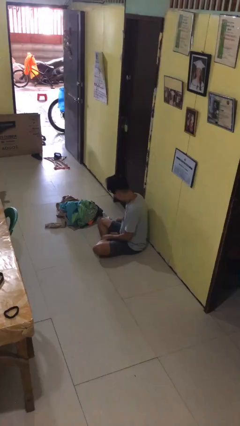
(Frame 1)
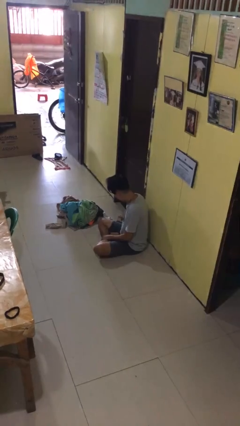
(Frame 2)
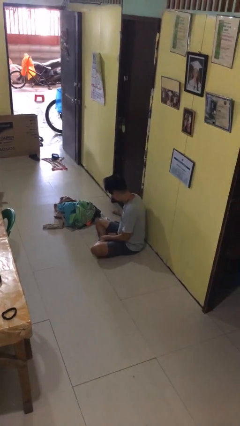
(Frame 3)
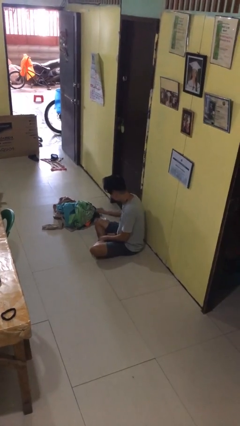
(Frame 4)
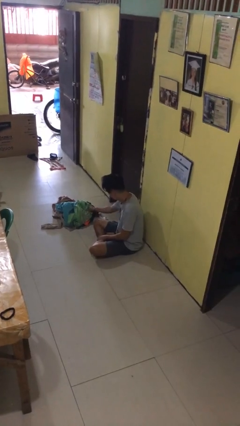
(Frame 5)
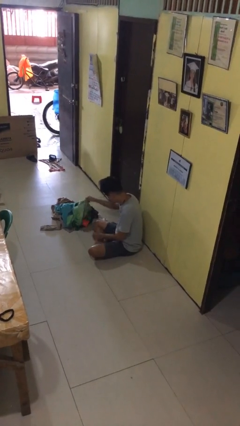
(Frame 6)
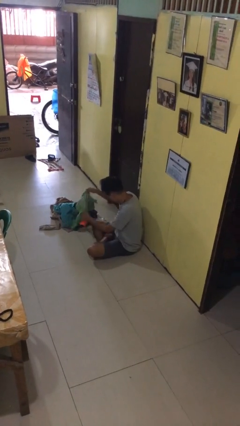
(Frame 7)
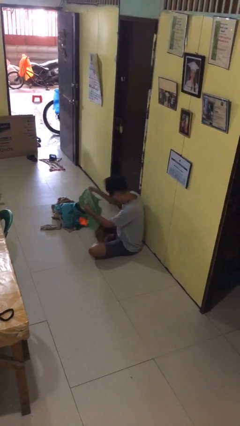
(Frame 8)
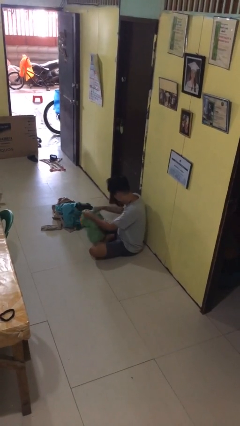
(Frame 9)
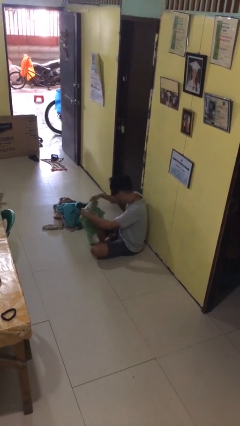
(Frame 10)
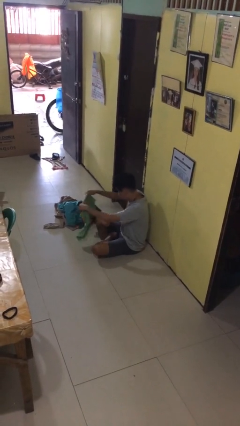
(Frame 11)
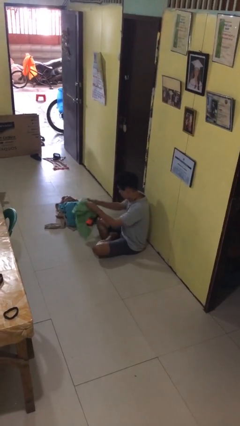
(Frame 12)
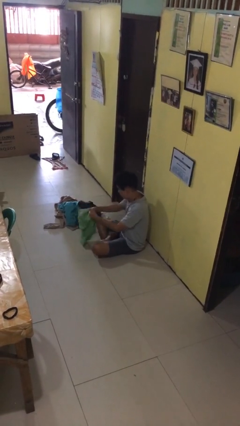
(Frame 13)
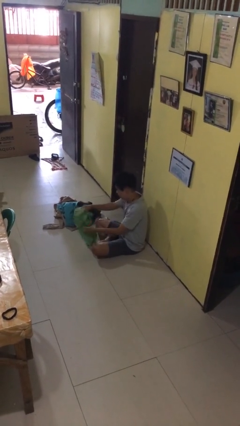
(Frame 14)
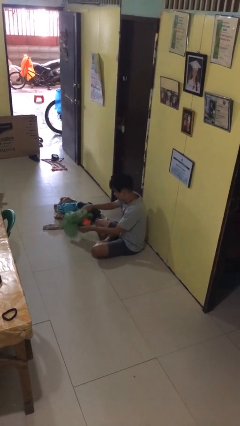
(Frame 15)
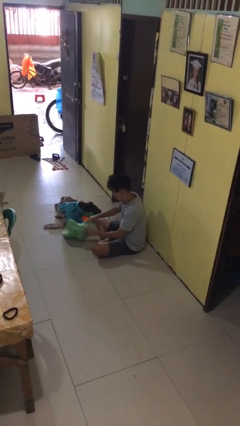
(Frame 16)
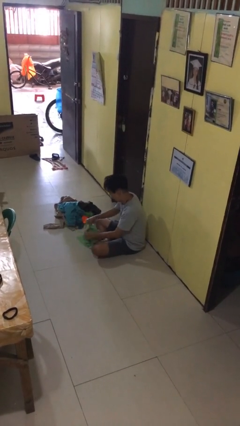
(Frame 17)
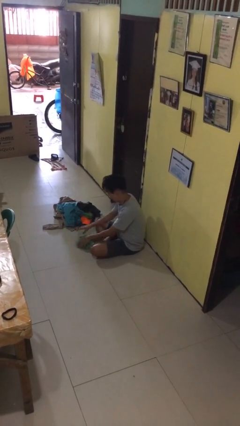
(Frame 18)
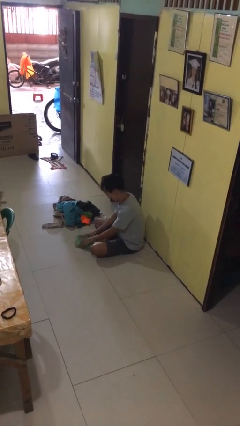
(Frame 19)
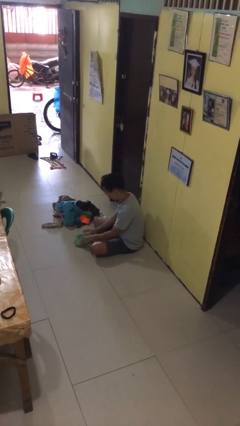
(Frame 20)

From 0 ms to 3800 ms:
person folds shirt

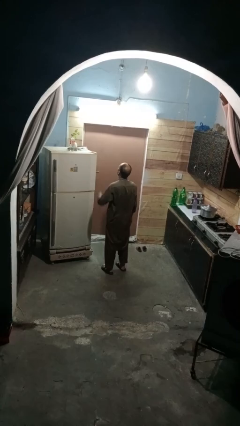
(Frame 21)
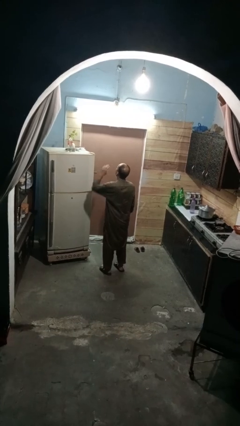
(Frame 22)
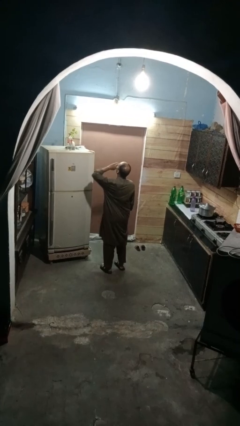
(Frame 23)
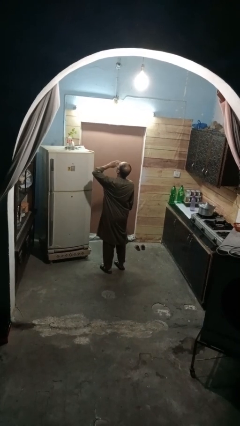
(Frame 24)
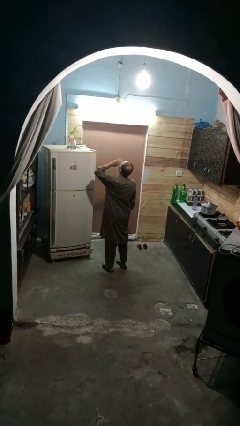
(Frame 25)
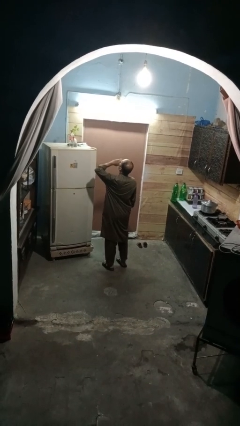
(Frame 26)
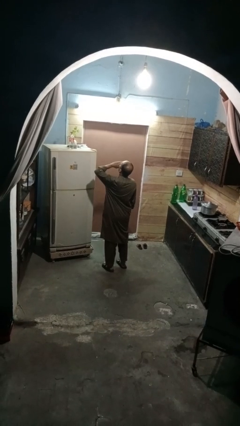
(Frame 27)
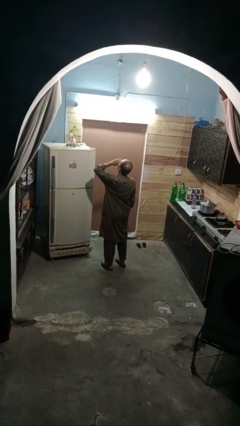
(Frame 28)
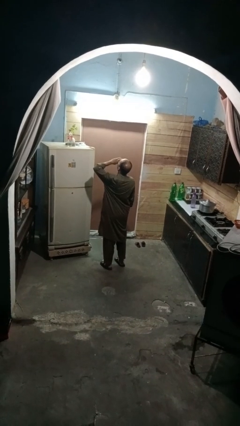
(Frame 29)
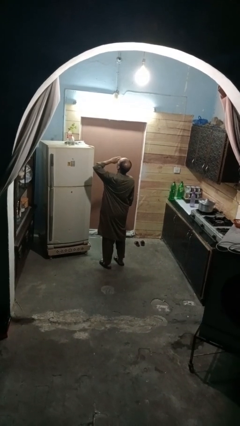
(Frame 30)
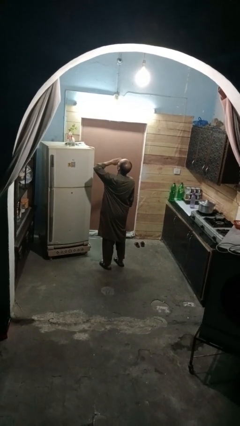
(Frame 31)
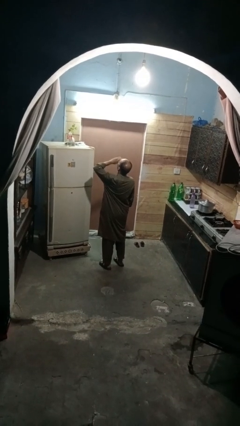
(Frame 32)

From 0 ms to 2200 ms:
person yawns

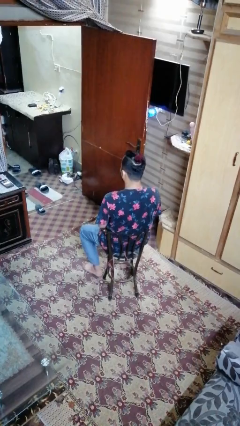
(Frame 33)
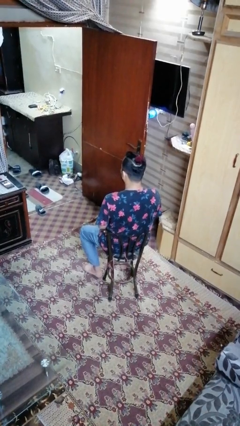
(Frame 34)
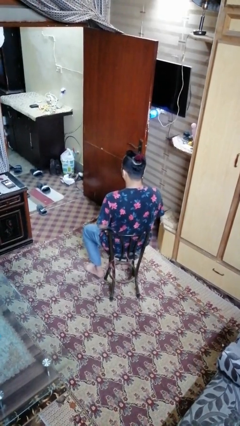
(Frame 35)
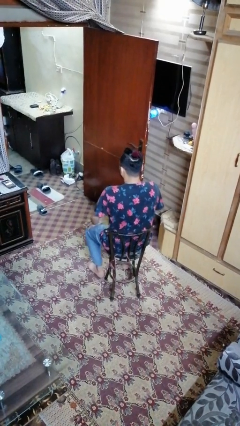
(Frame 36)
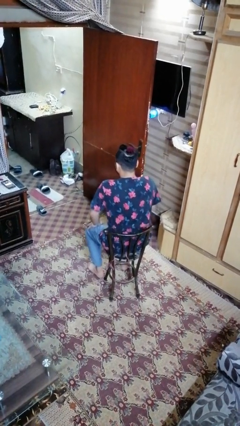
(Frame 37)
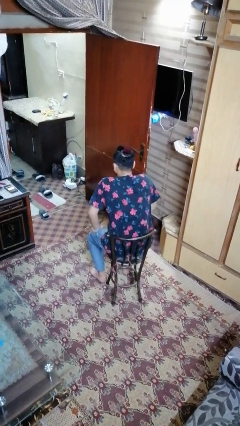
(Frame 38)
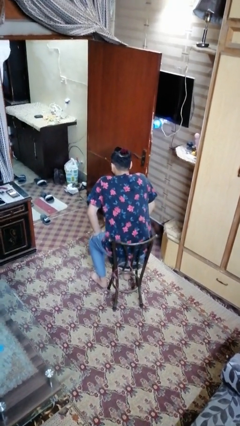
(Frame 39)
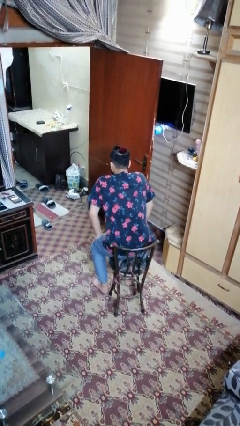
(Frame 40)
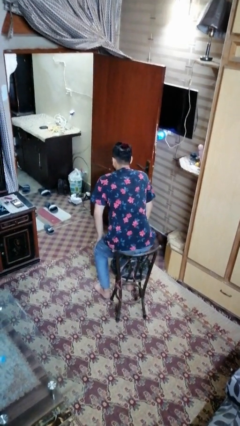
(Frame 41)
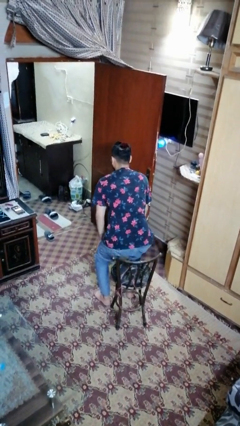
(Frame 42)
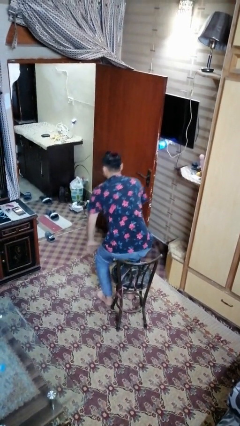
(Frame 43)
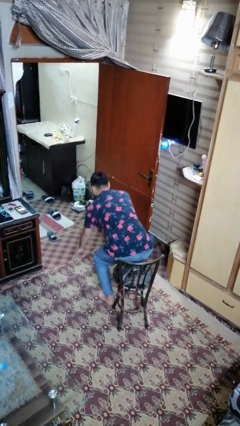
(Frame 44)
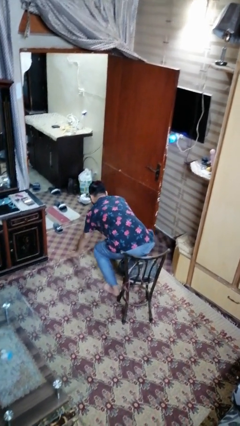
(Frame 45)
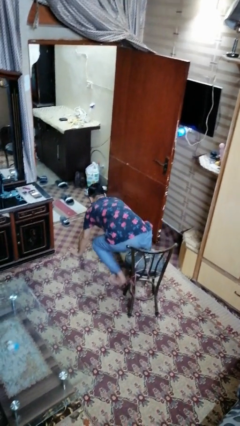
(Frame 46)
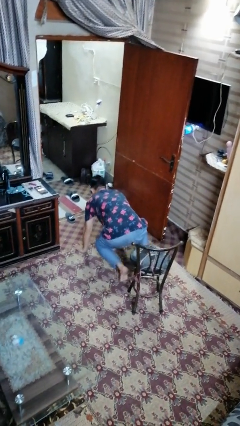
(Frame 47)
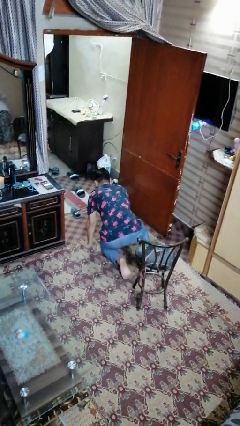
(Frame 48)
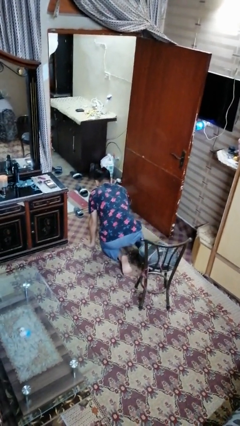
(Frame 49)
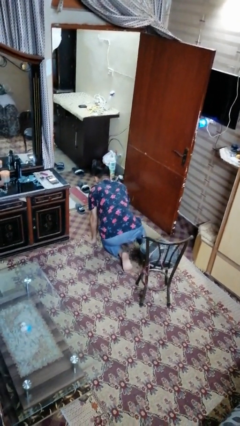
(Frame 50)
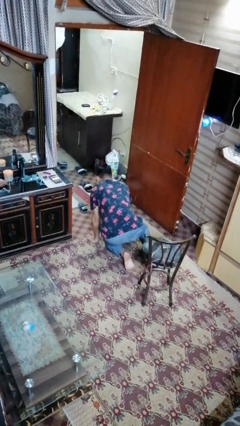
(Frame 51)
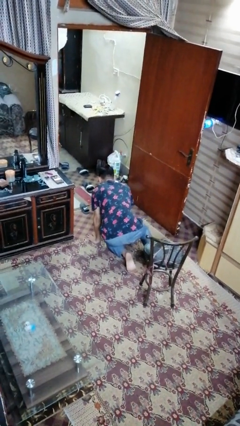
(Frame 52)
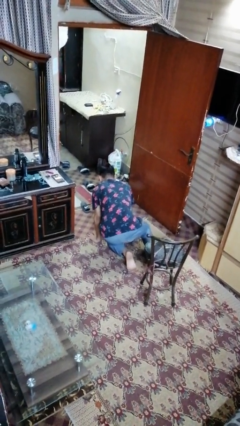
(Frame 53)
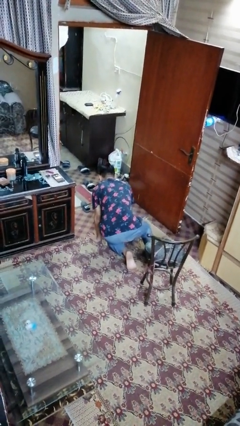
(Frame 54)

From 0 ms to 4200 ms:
person falls from chair

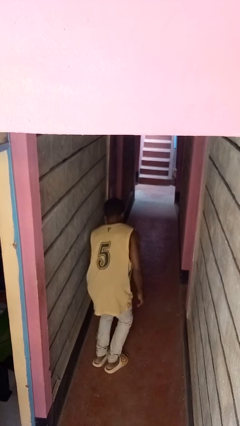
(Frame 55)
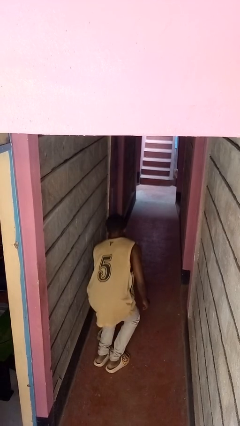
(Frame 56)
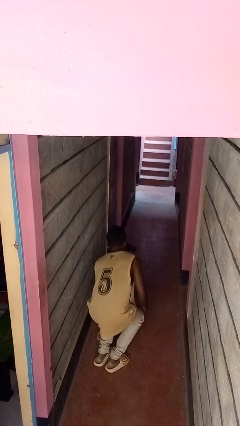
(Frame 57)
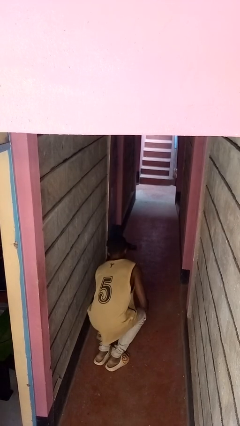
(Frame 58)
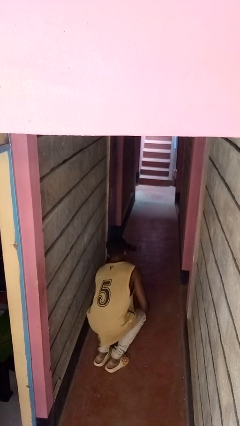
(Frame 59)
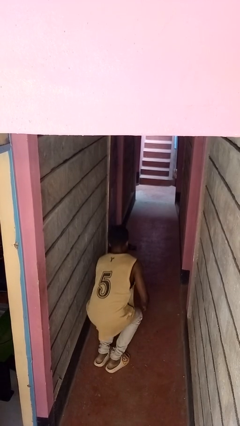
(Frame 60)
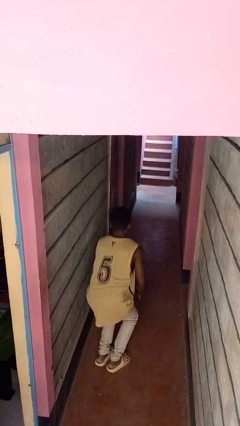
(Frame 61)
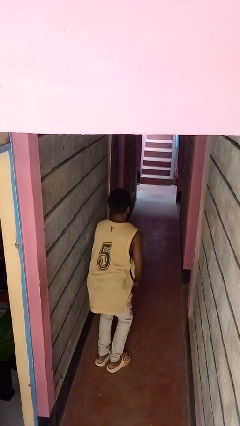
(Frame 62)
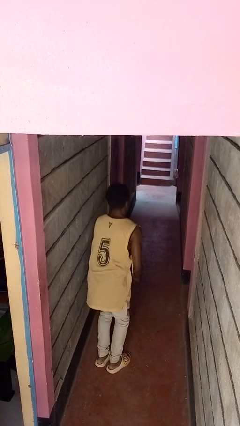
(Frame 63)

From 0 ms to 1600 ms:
person picks up object from floor

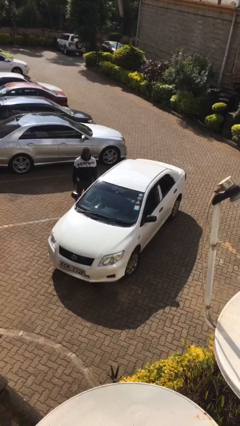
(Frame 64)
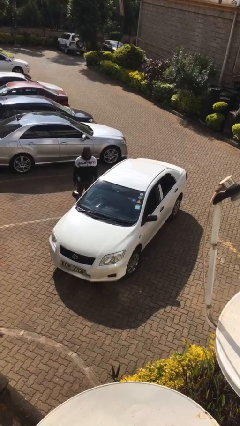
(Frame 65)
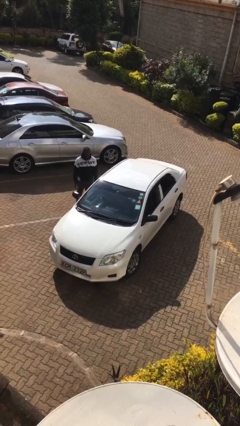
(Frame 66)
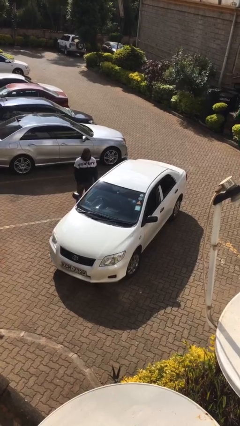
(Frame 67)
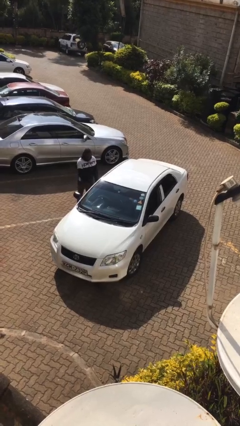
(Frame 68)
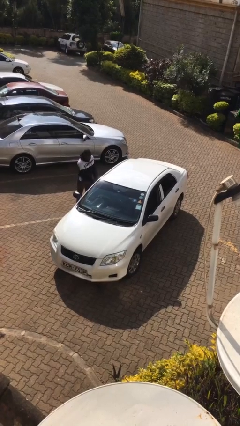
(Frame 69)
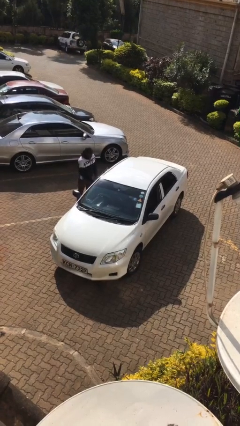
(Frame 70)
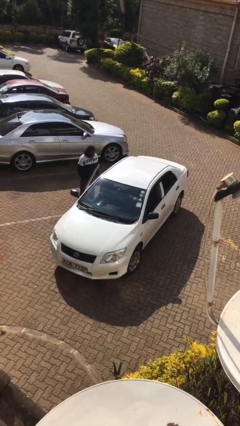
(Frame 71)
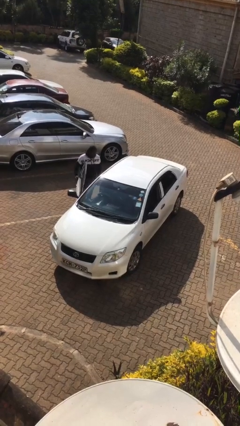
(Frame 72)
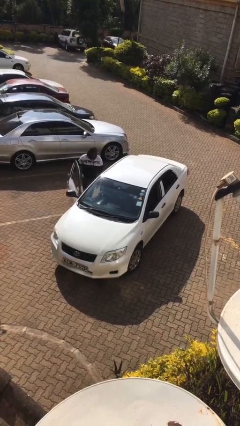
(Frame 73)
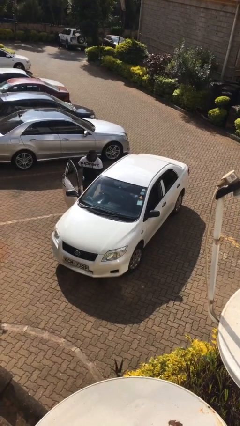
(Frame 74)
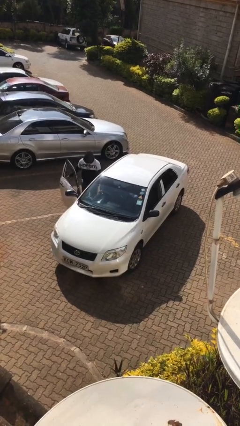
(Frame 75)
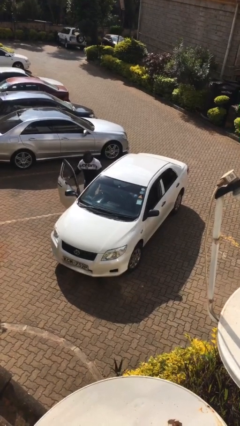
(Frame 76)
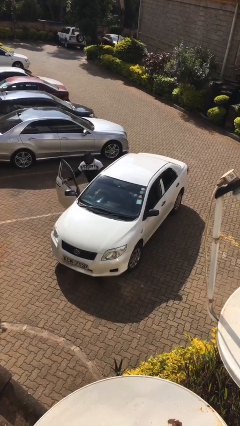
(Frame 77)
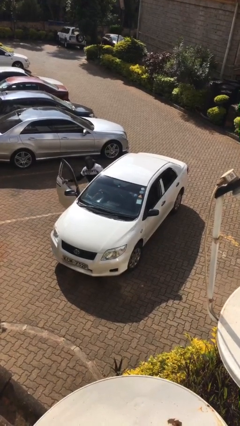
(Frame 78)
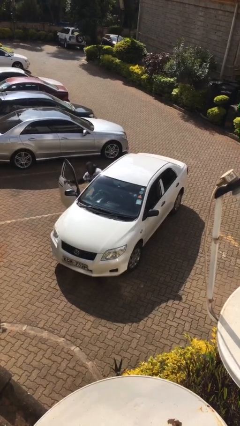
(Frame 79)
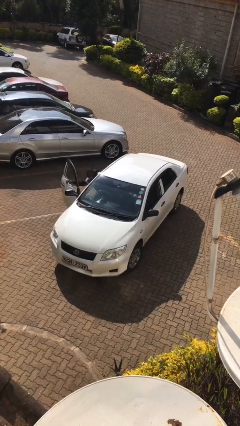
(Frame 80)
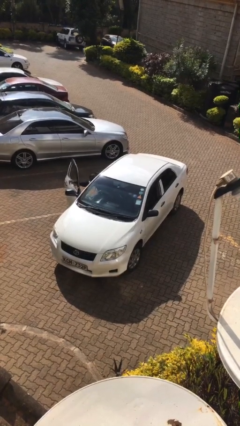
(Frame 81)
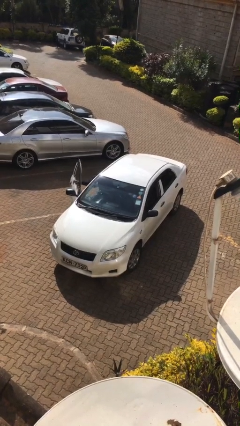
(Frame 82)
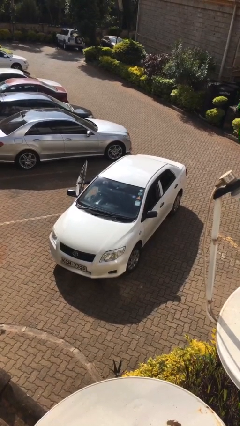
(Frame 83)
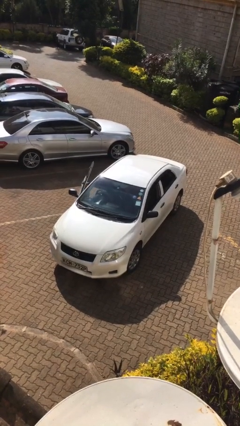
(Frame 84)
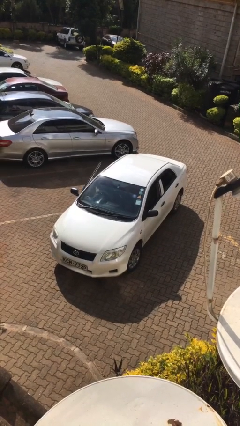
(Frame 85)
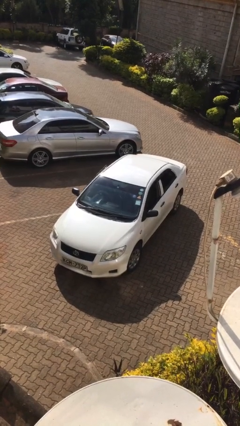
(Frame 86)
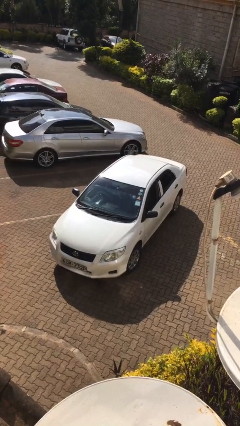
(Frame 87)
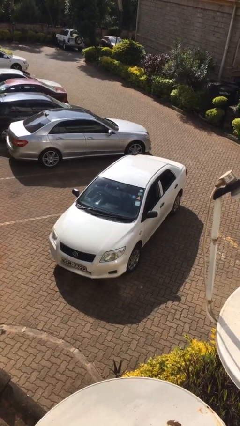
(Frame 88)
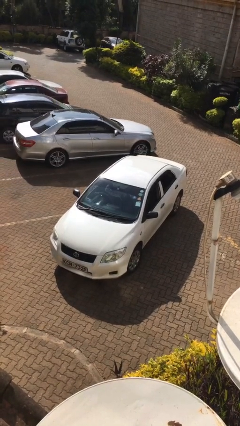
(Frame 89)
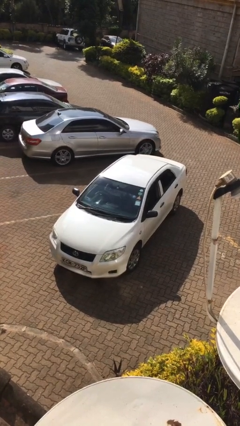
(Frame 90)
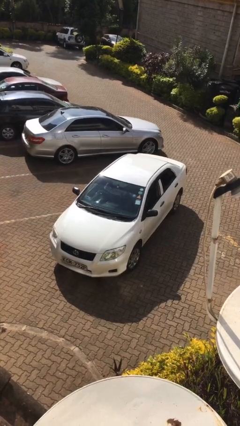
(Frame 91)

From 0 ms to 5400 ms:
car picks up person

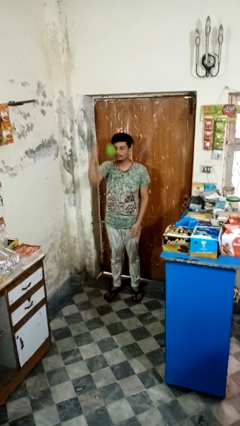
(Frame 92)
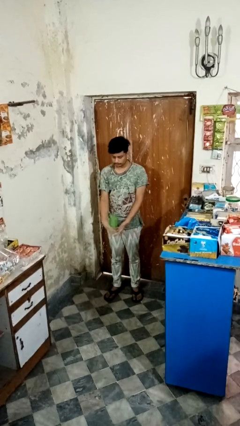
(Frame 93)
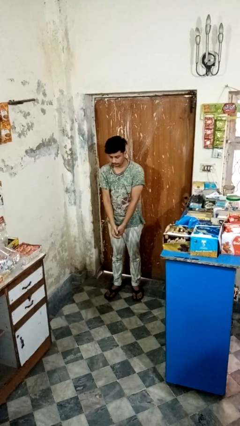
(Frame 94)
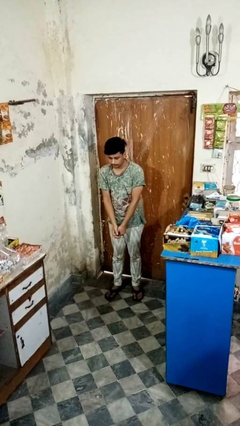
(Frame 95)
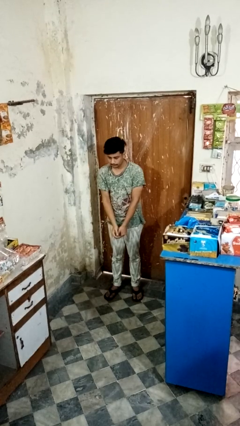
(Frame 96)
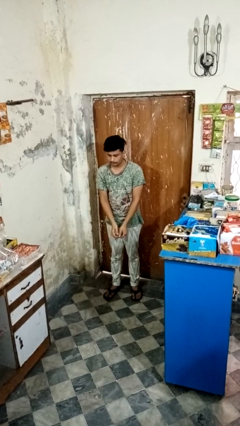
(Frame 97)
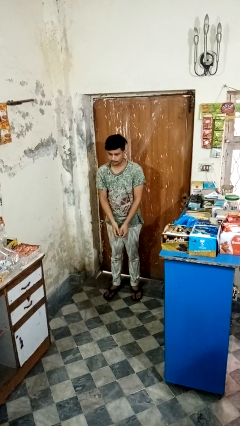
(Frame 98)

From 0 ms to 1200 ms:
person catches dropped object
